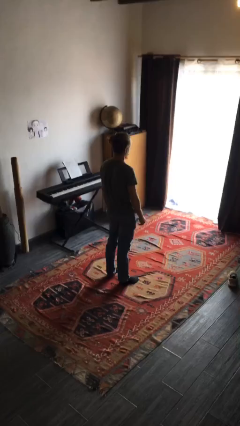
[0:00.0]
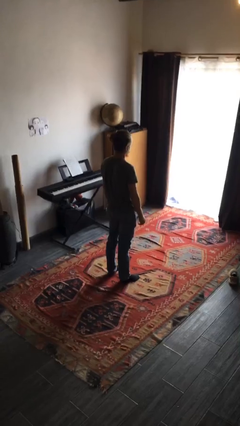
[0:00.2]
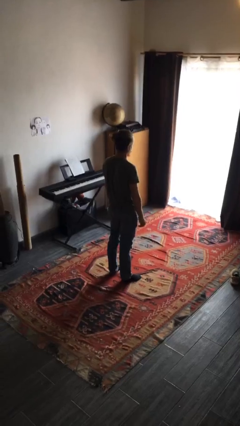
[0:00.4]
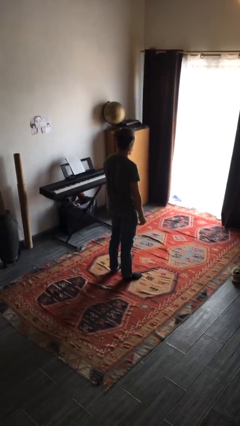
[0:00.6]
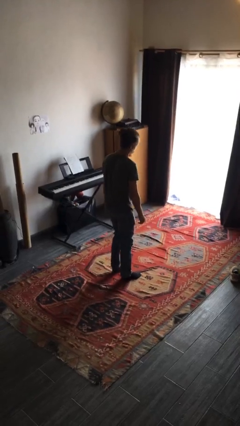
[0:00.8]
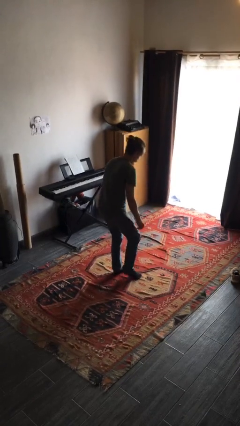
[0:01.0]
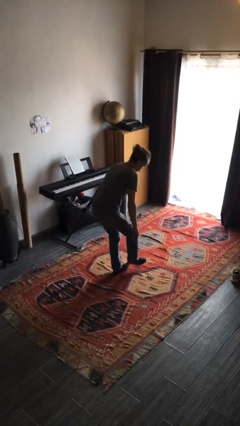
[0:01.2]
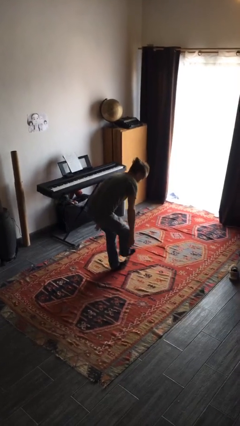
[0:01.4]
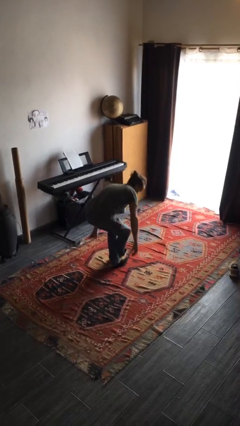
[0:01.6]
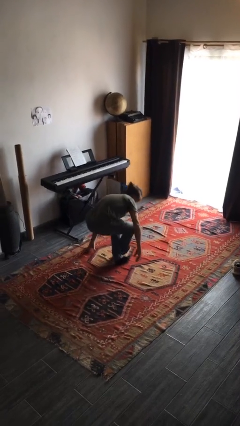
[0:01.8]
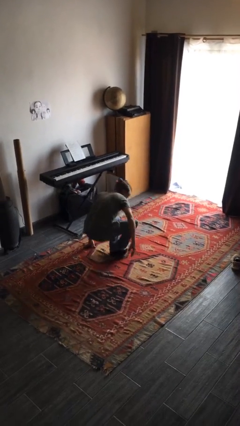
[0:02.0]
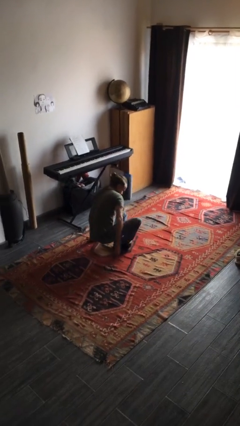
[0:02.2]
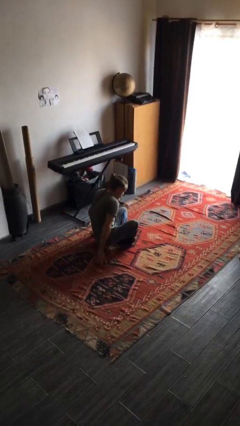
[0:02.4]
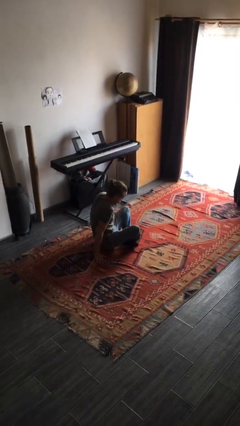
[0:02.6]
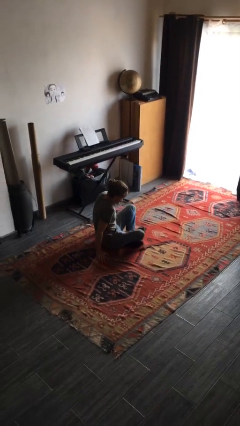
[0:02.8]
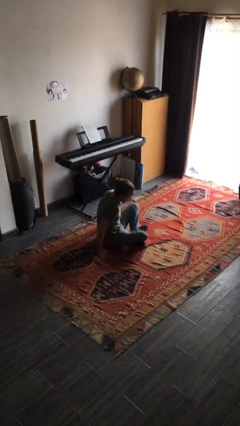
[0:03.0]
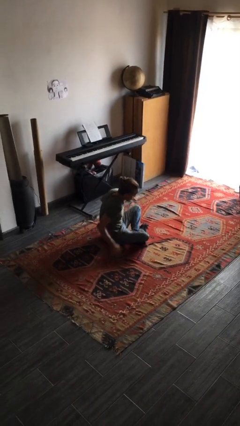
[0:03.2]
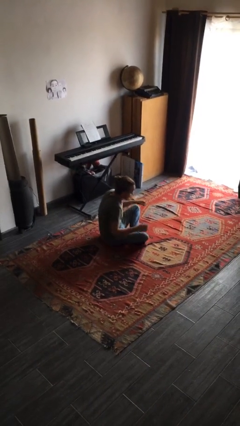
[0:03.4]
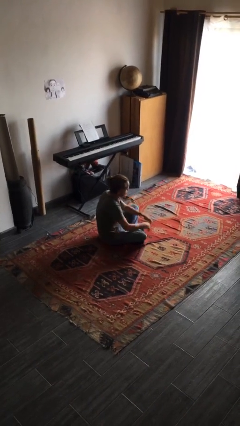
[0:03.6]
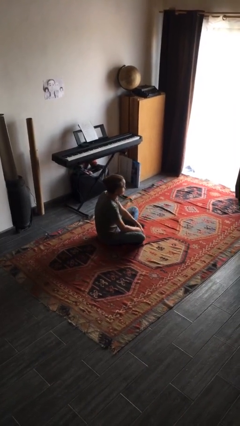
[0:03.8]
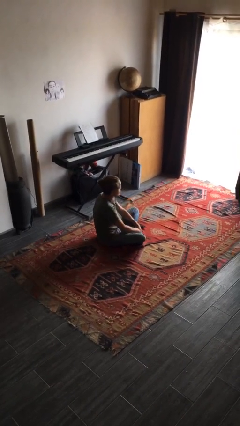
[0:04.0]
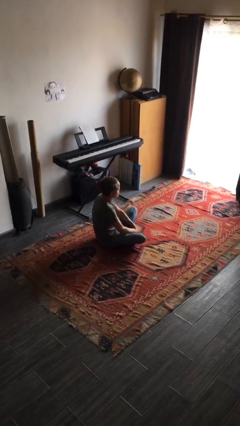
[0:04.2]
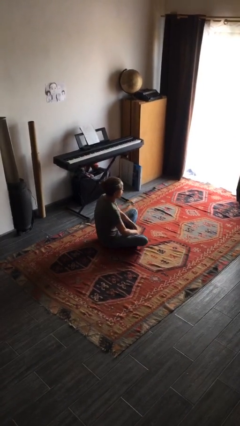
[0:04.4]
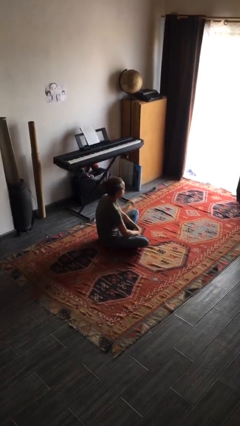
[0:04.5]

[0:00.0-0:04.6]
person sits crisscross

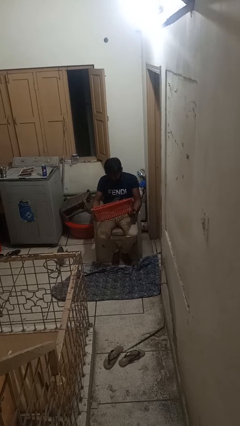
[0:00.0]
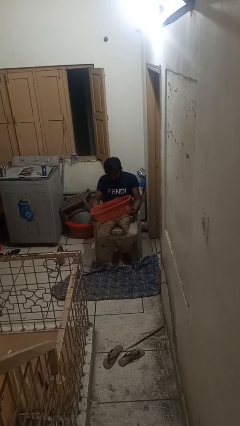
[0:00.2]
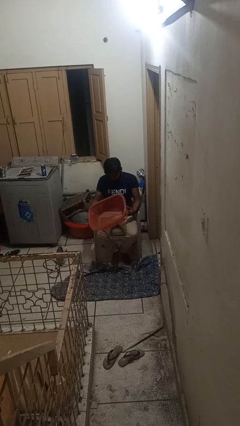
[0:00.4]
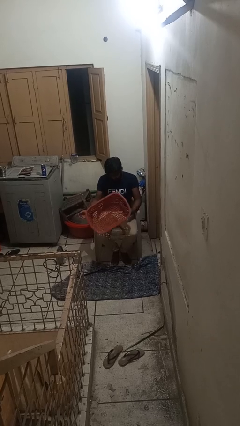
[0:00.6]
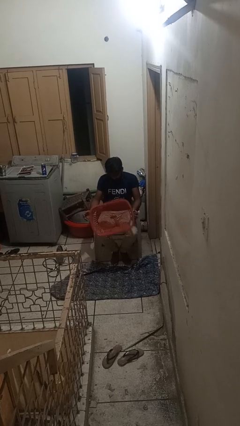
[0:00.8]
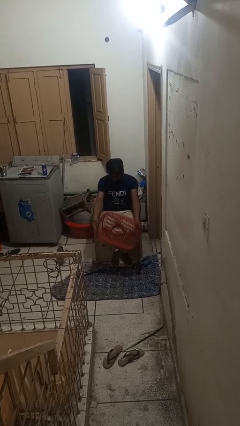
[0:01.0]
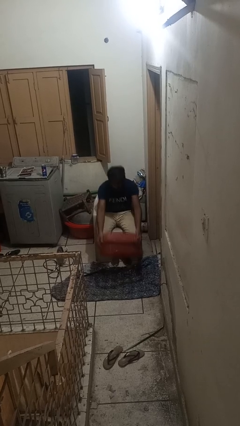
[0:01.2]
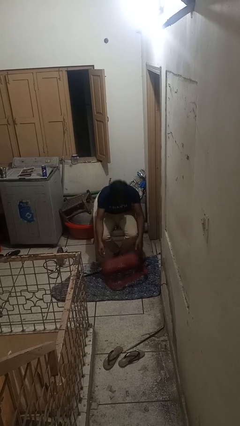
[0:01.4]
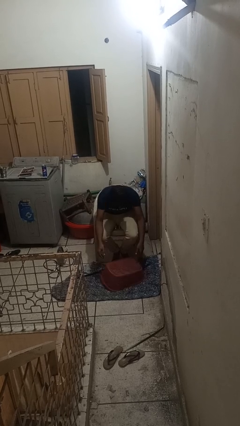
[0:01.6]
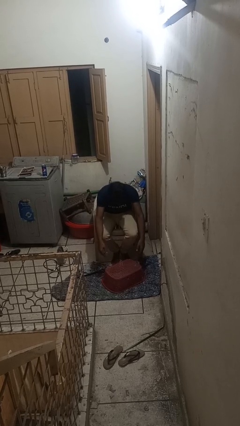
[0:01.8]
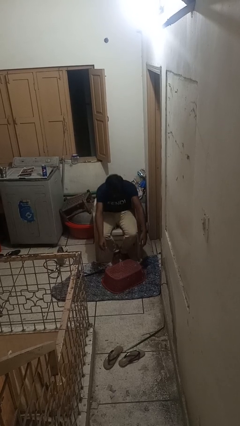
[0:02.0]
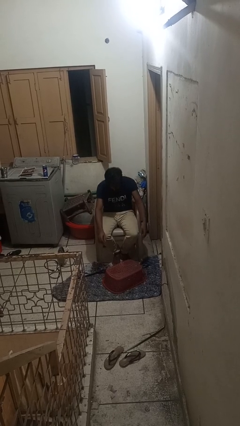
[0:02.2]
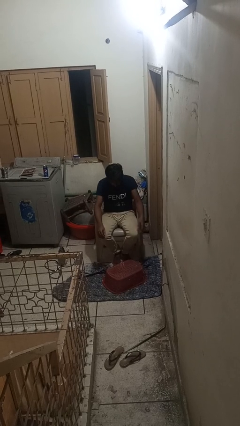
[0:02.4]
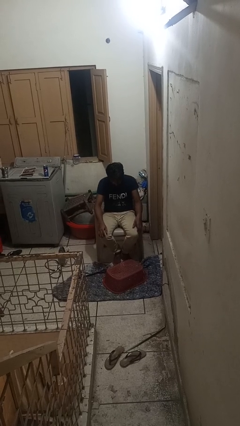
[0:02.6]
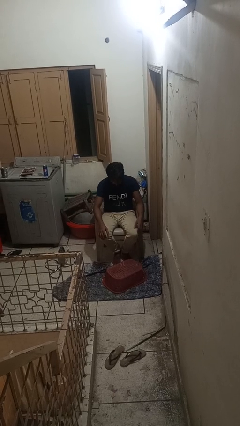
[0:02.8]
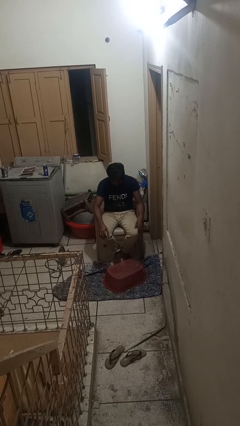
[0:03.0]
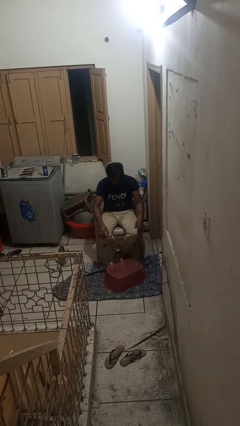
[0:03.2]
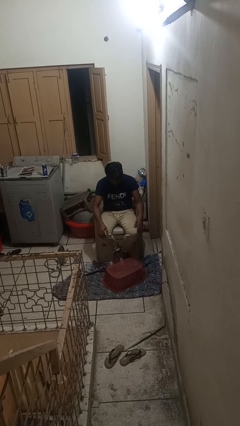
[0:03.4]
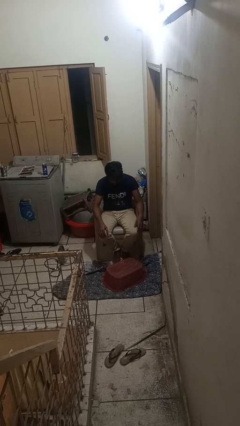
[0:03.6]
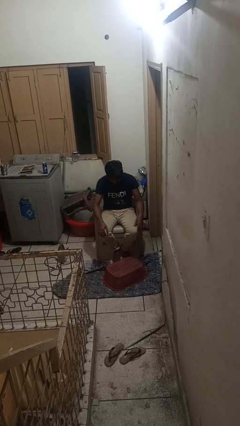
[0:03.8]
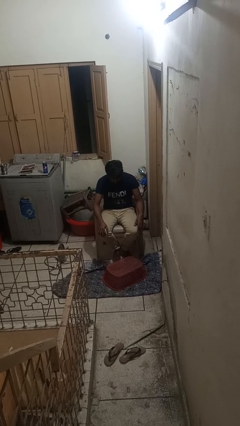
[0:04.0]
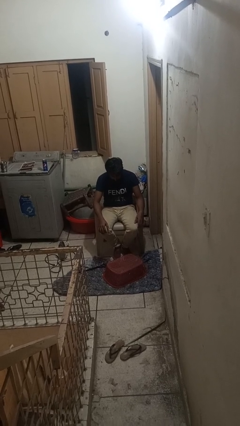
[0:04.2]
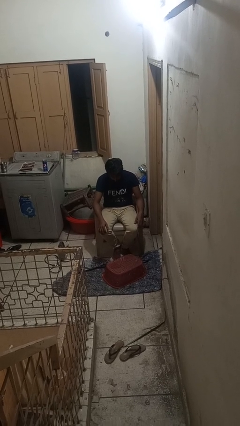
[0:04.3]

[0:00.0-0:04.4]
person drops object

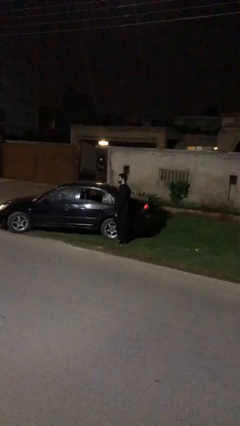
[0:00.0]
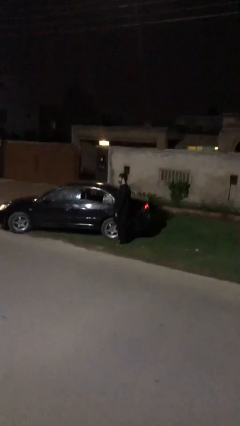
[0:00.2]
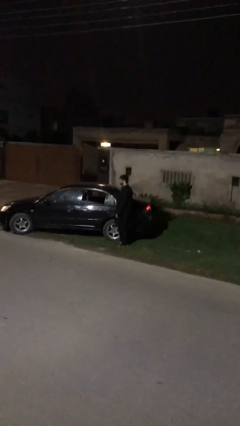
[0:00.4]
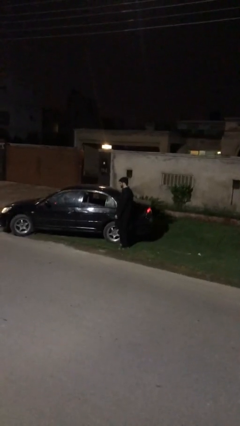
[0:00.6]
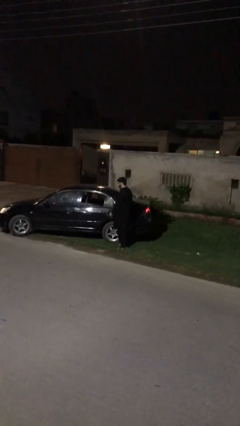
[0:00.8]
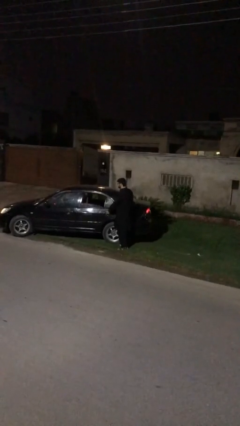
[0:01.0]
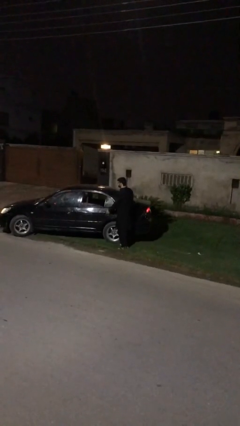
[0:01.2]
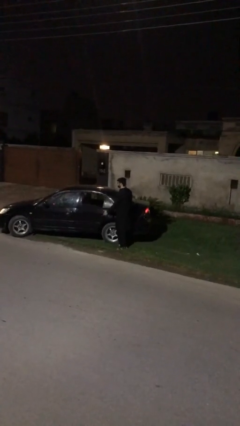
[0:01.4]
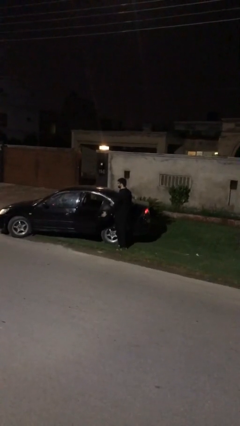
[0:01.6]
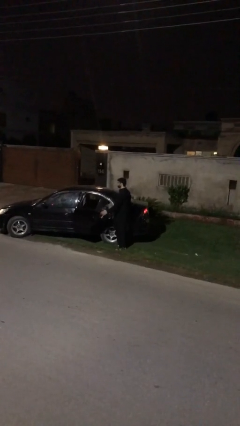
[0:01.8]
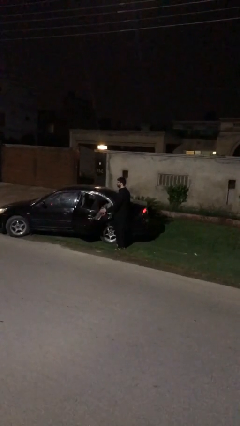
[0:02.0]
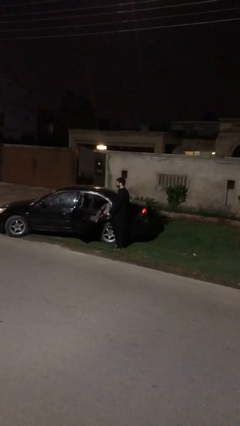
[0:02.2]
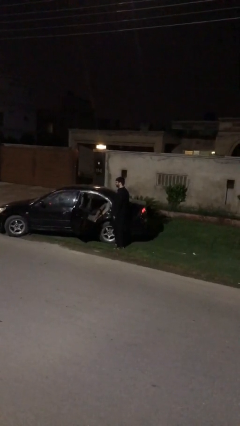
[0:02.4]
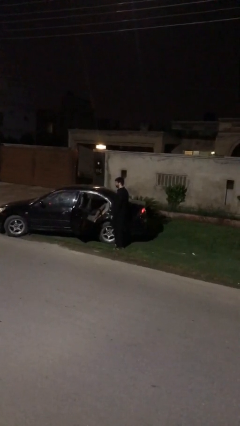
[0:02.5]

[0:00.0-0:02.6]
person opens car door

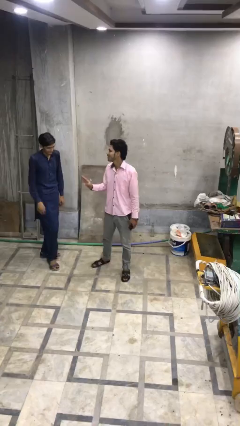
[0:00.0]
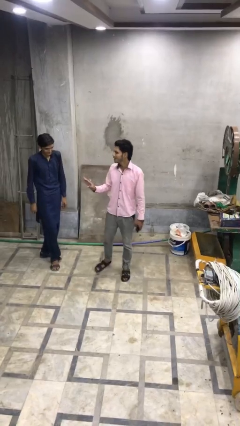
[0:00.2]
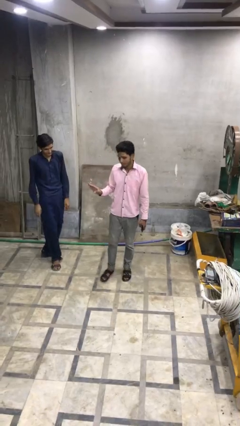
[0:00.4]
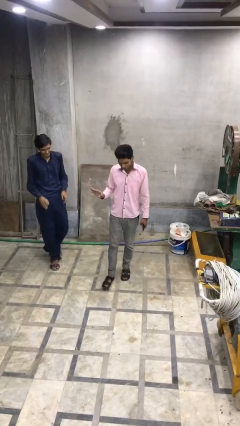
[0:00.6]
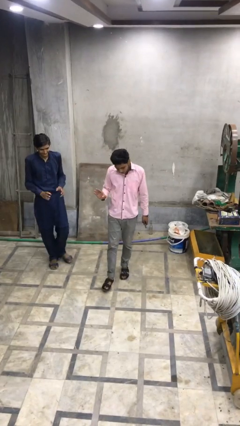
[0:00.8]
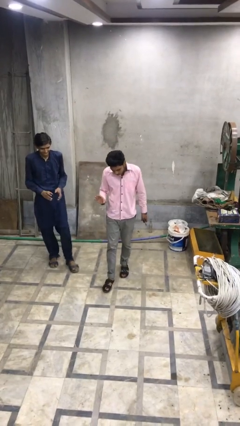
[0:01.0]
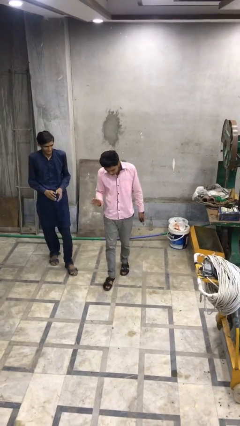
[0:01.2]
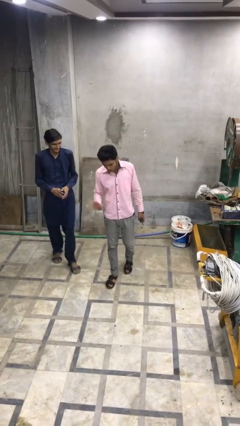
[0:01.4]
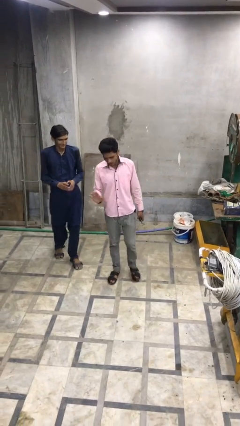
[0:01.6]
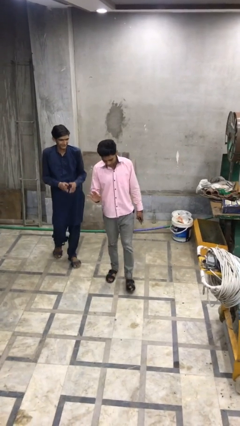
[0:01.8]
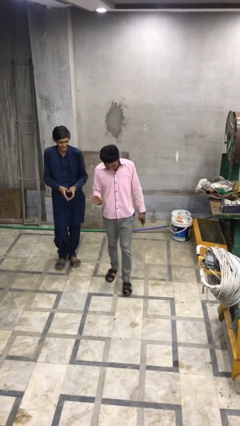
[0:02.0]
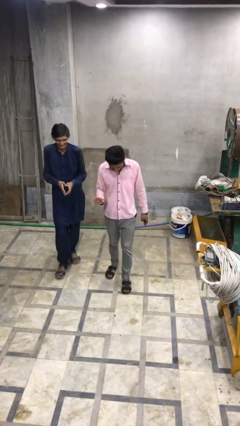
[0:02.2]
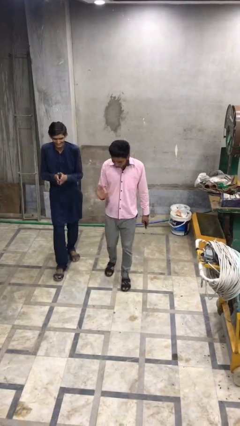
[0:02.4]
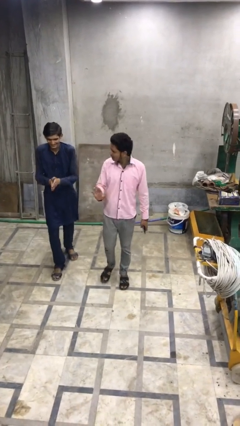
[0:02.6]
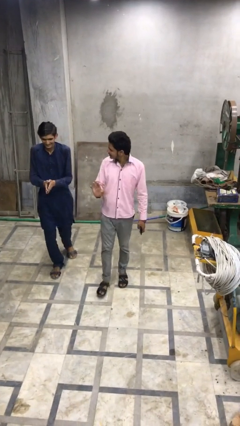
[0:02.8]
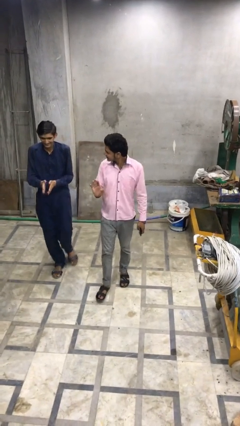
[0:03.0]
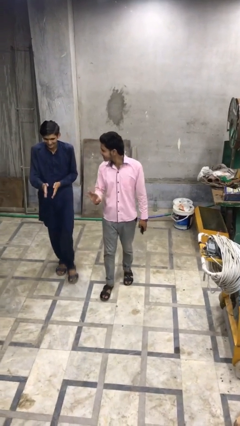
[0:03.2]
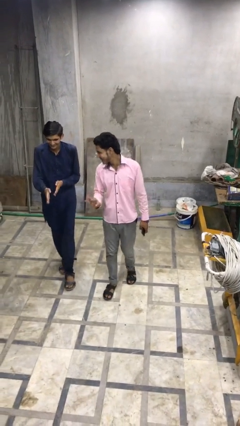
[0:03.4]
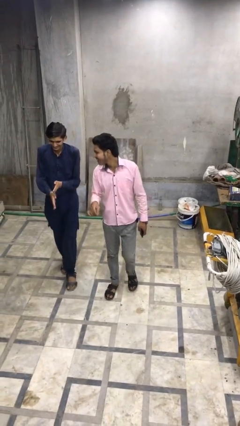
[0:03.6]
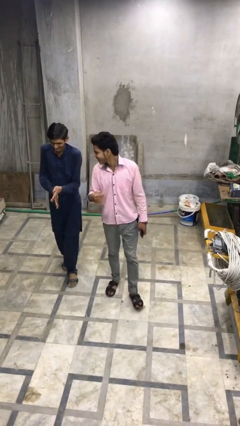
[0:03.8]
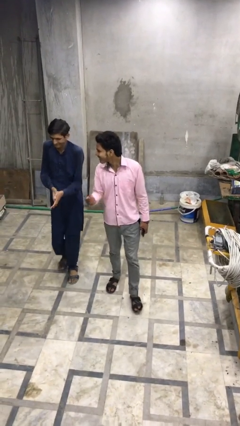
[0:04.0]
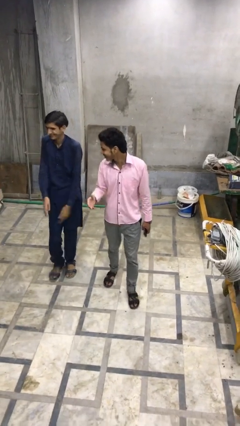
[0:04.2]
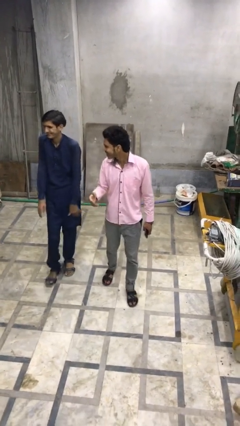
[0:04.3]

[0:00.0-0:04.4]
person talks to person

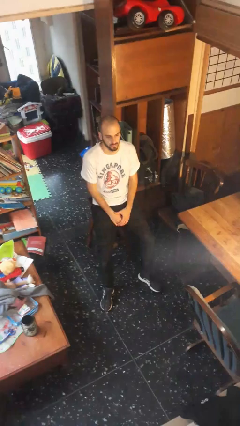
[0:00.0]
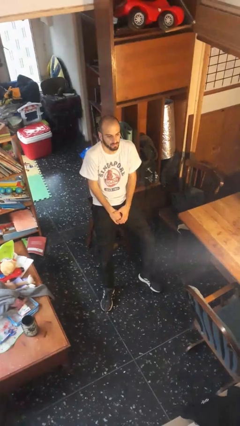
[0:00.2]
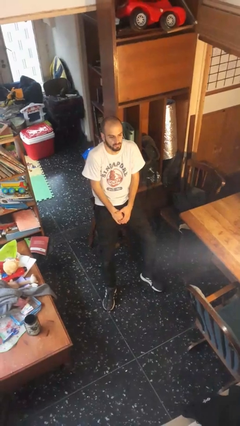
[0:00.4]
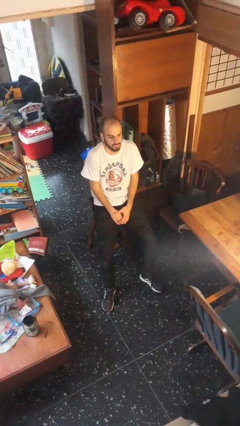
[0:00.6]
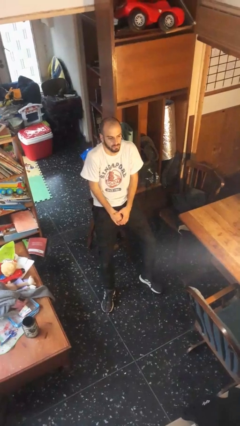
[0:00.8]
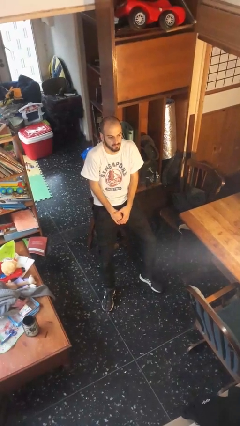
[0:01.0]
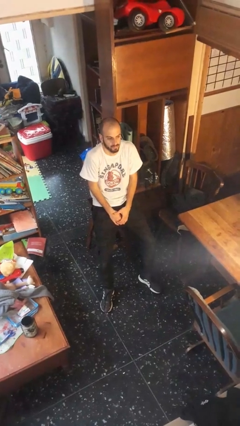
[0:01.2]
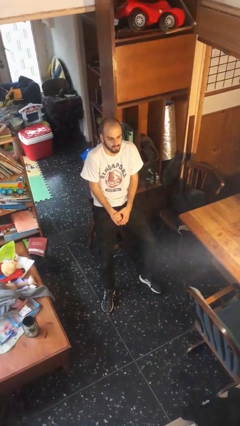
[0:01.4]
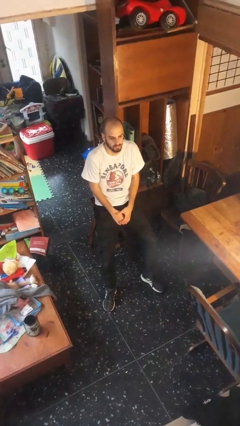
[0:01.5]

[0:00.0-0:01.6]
person shrugs
